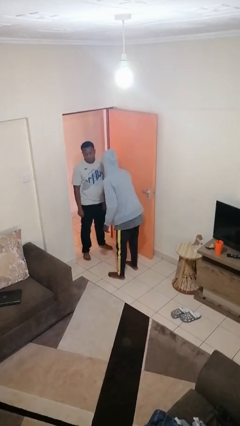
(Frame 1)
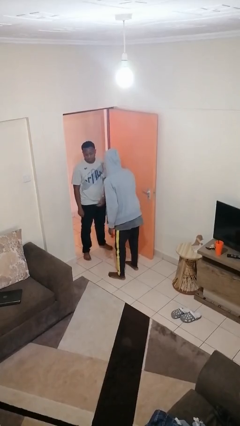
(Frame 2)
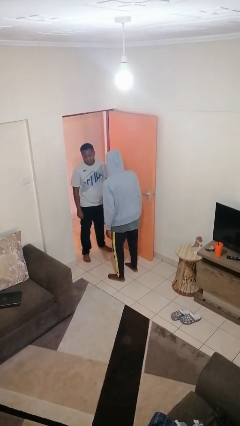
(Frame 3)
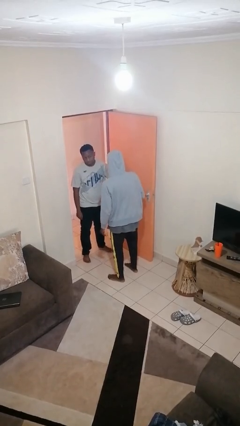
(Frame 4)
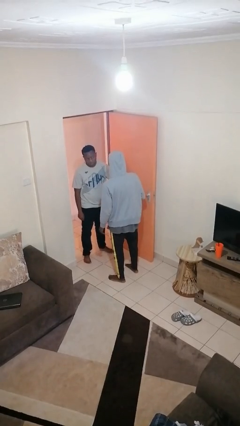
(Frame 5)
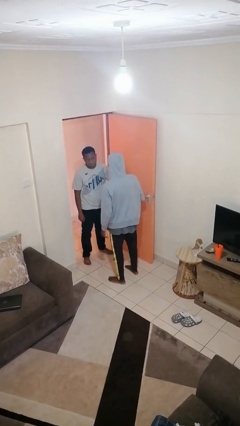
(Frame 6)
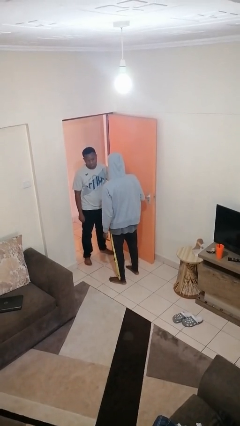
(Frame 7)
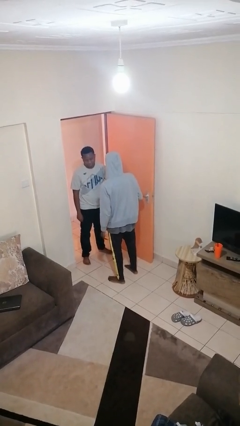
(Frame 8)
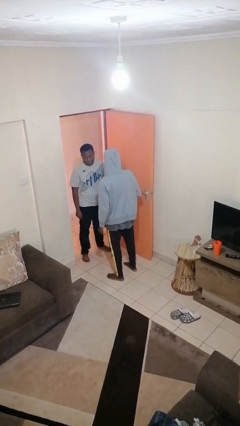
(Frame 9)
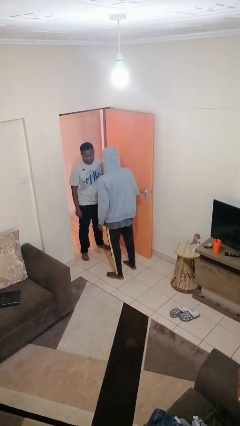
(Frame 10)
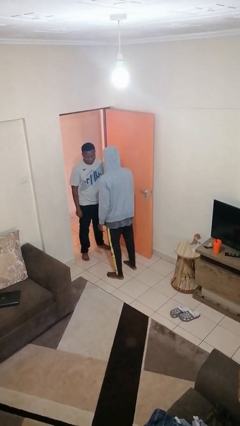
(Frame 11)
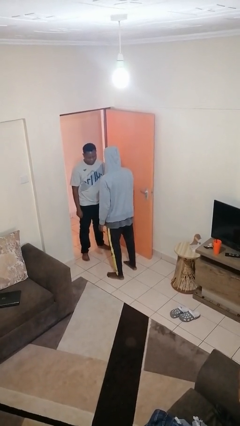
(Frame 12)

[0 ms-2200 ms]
person grabs person by forearm

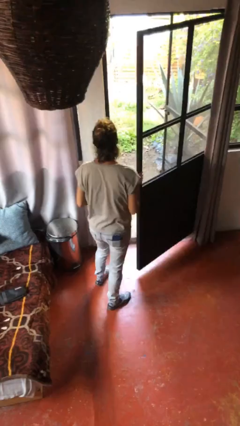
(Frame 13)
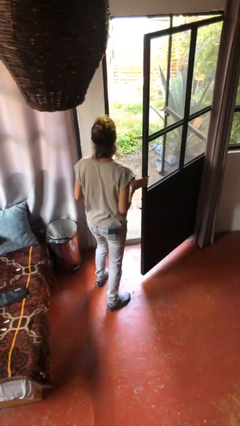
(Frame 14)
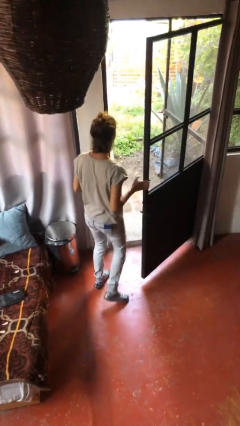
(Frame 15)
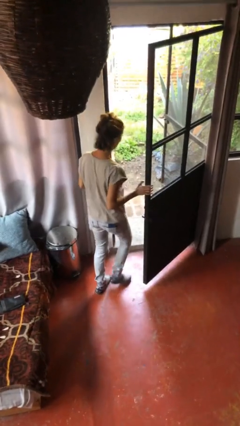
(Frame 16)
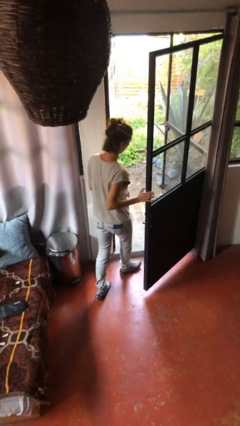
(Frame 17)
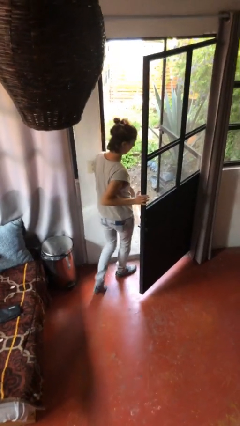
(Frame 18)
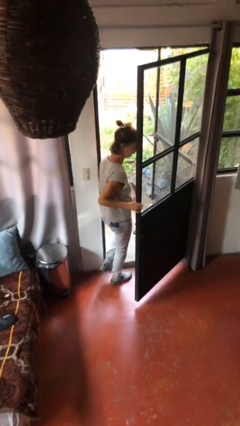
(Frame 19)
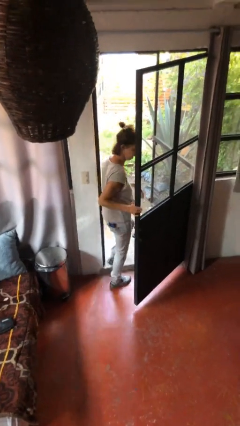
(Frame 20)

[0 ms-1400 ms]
person exits scene through structure

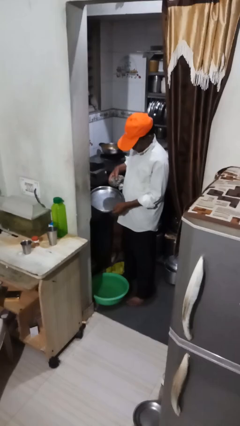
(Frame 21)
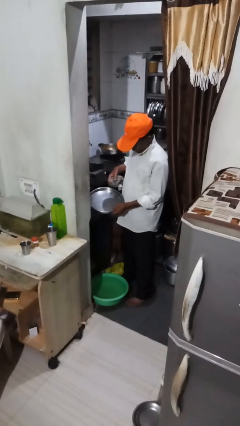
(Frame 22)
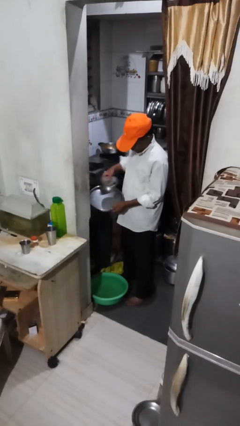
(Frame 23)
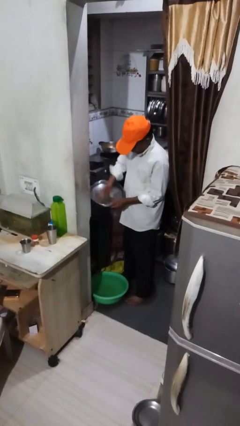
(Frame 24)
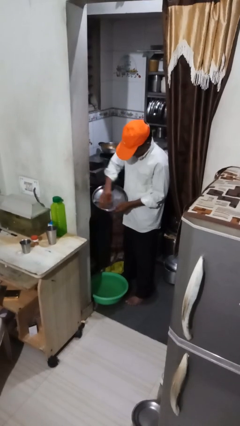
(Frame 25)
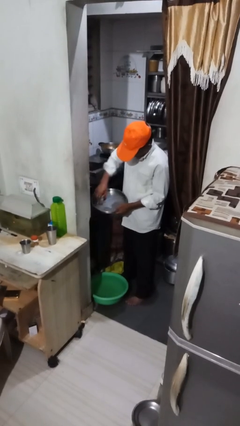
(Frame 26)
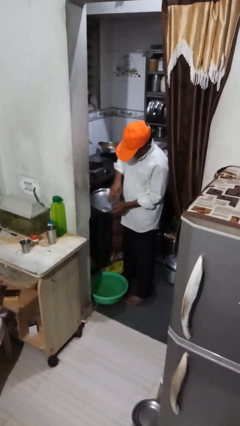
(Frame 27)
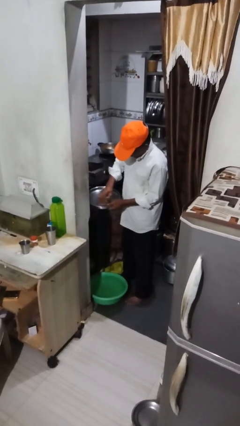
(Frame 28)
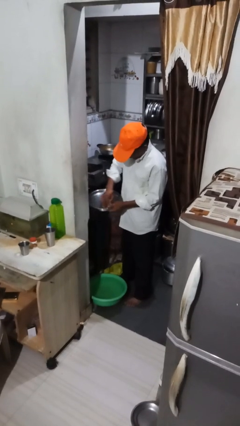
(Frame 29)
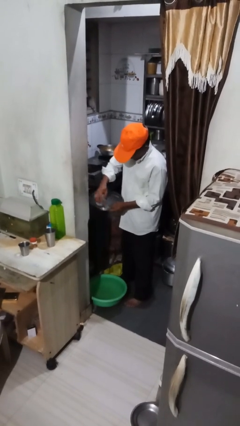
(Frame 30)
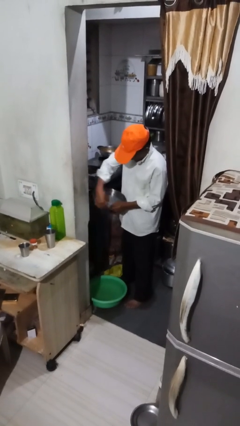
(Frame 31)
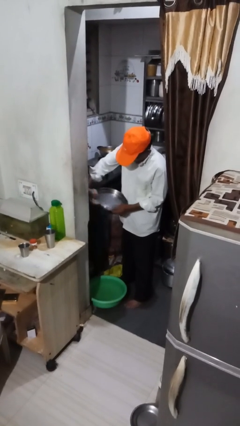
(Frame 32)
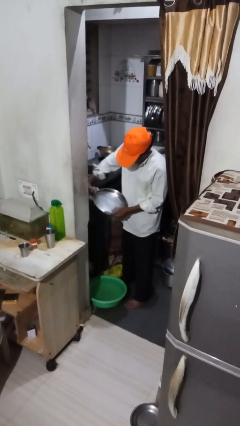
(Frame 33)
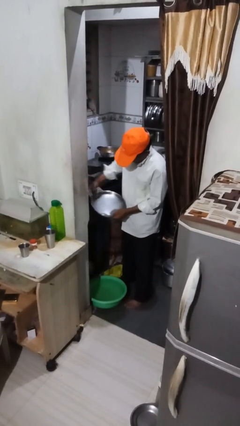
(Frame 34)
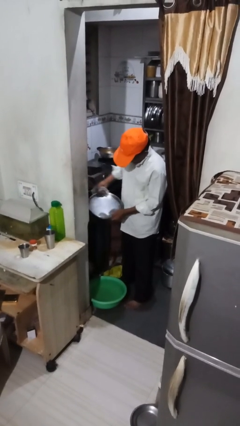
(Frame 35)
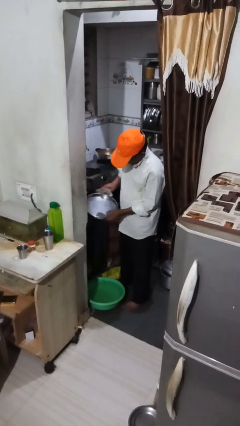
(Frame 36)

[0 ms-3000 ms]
person dries dish

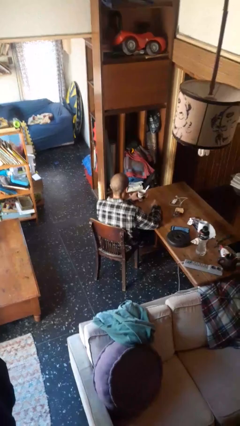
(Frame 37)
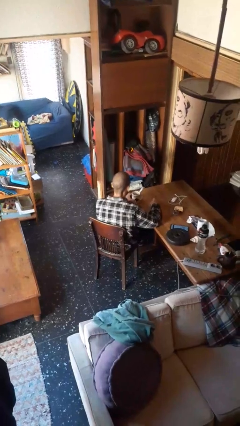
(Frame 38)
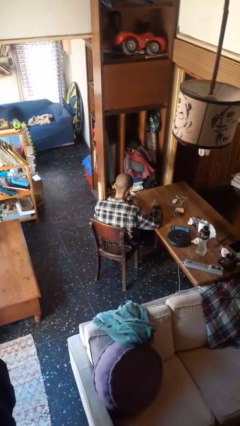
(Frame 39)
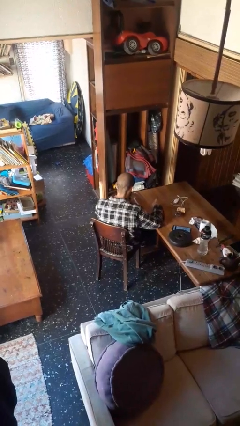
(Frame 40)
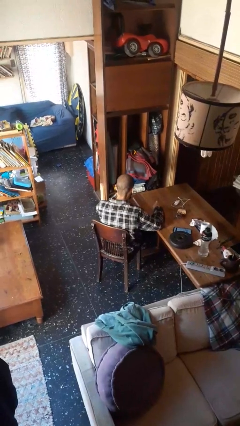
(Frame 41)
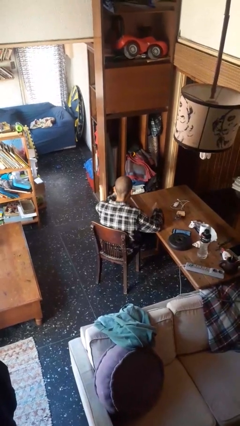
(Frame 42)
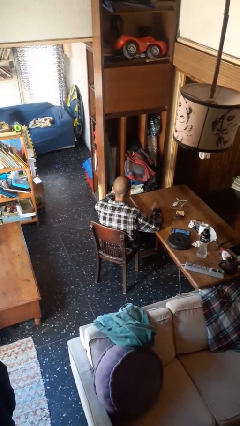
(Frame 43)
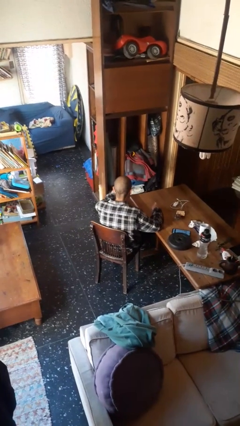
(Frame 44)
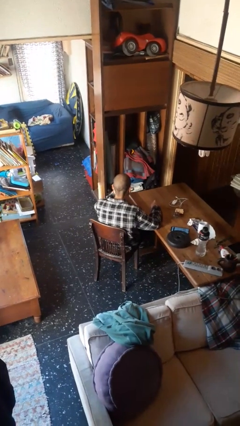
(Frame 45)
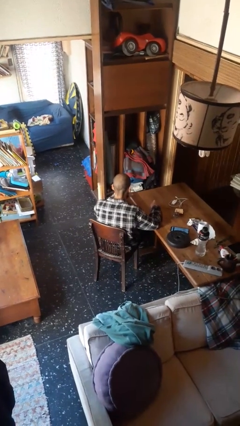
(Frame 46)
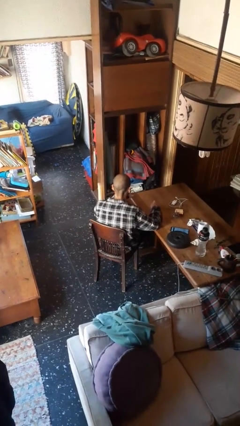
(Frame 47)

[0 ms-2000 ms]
person drinks from mug

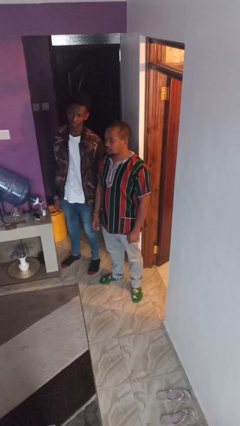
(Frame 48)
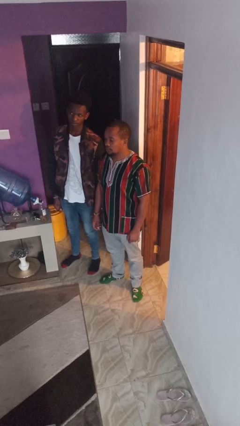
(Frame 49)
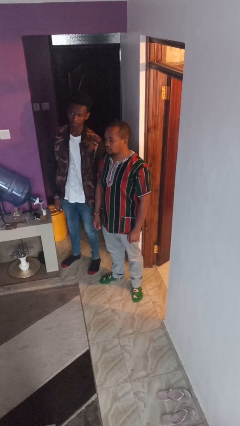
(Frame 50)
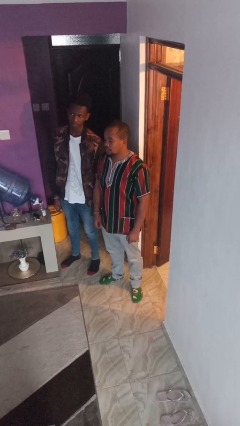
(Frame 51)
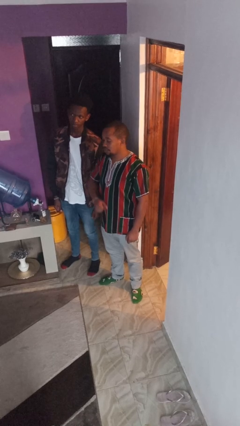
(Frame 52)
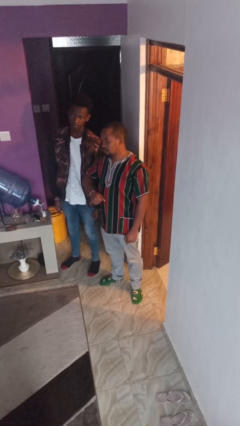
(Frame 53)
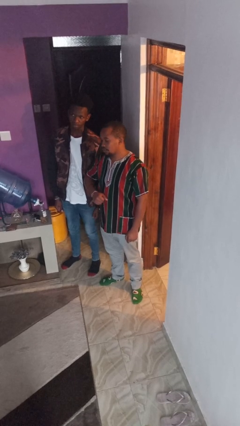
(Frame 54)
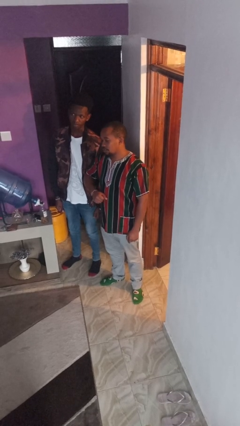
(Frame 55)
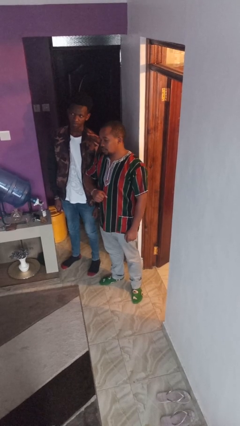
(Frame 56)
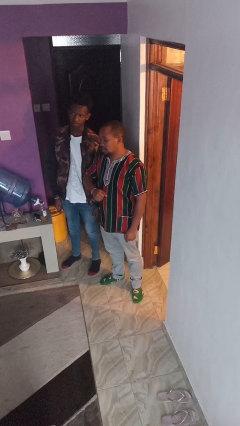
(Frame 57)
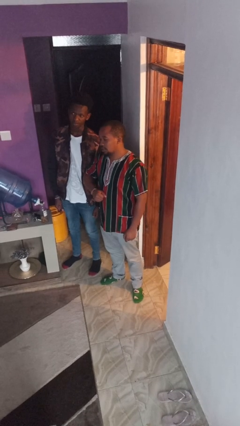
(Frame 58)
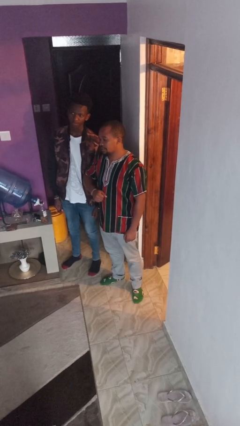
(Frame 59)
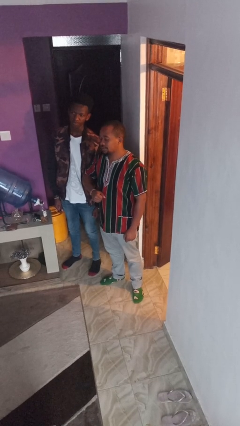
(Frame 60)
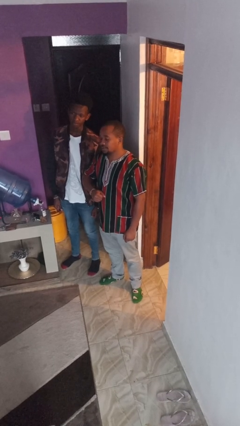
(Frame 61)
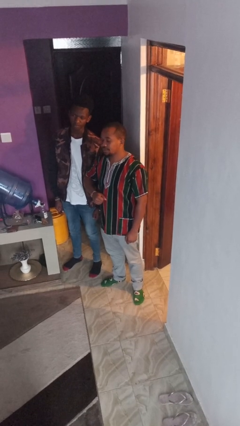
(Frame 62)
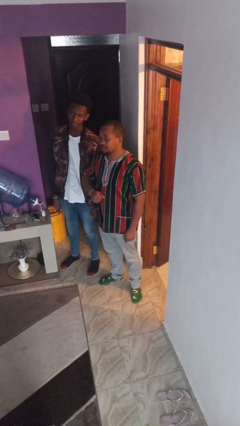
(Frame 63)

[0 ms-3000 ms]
person nudges person with elbow

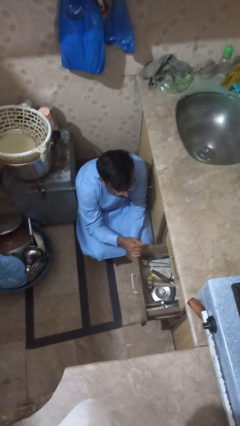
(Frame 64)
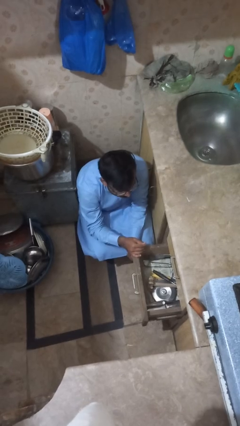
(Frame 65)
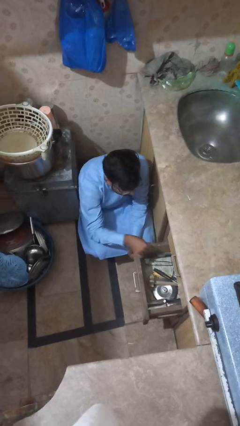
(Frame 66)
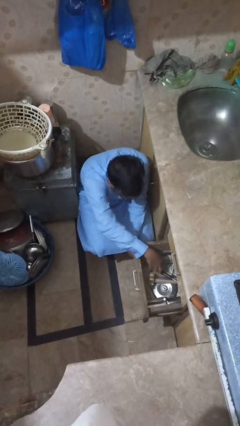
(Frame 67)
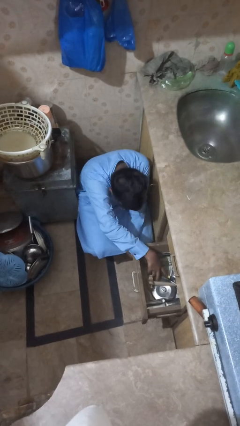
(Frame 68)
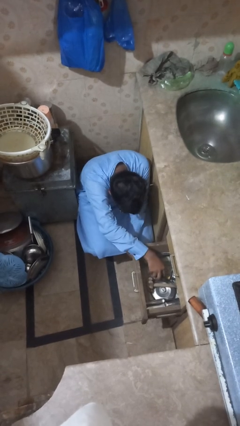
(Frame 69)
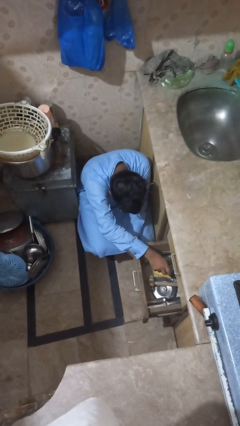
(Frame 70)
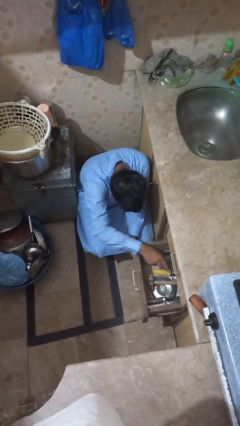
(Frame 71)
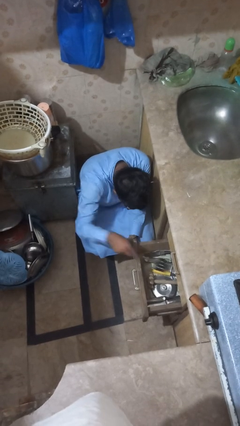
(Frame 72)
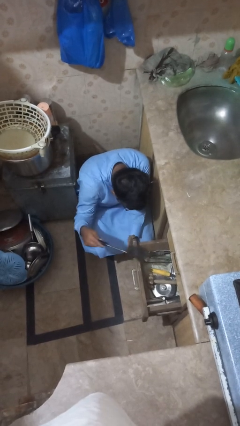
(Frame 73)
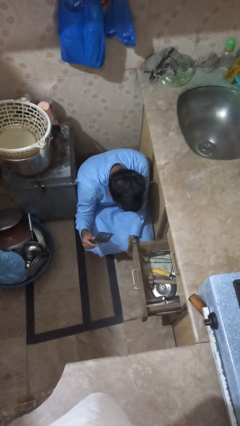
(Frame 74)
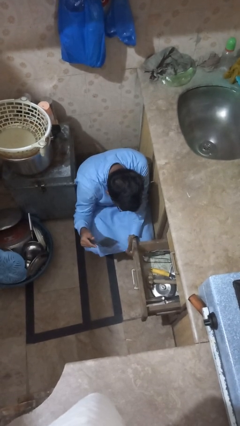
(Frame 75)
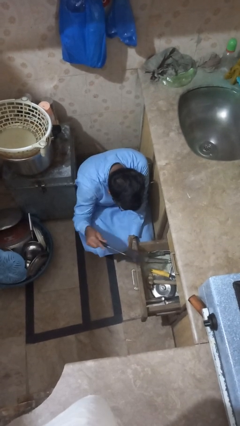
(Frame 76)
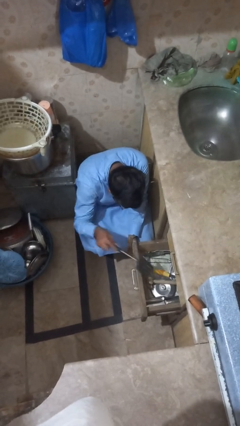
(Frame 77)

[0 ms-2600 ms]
person searches in kitchen drawer

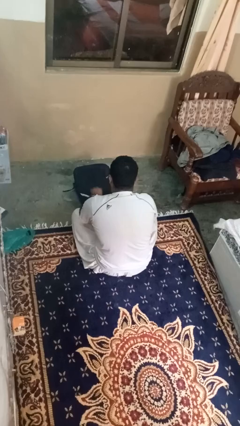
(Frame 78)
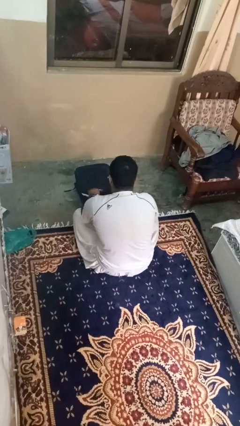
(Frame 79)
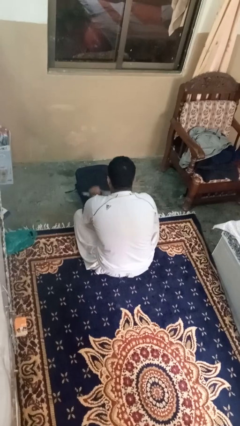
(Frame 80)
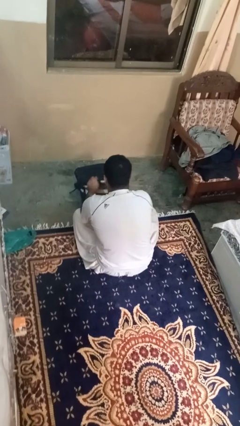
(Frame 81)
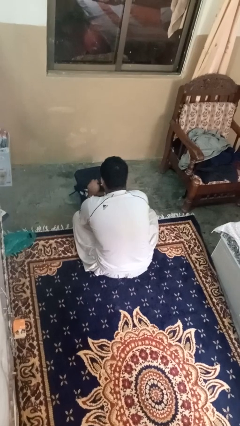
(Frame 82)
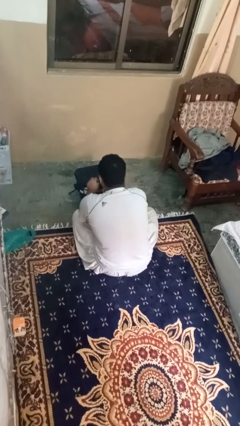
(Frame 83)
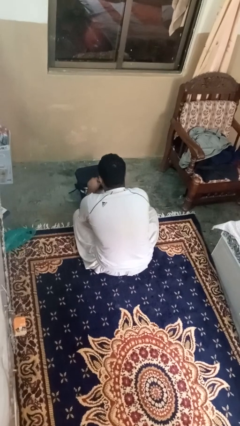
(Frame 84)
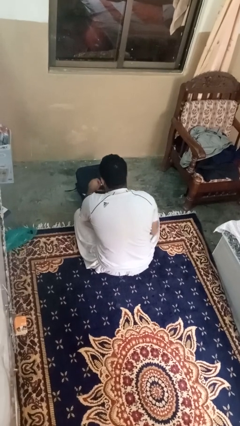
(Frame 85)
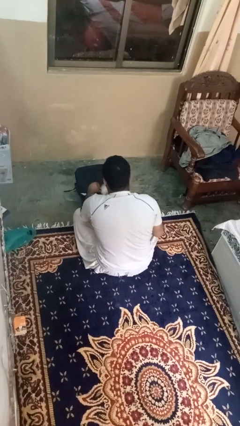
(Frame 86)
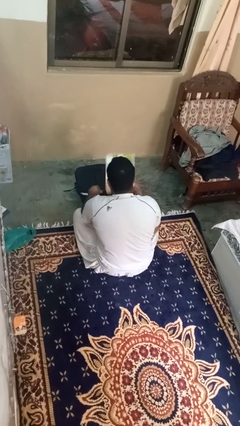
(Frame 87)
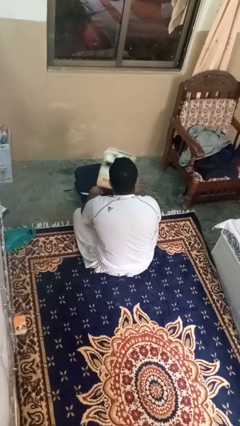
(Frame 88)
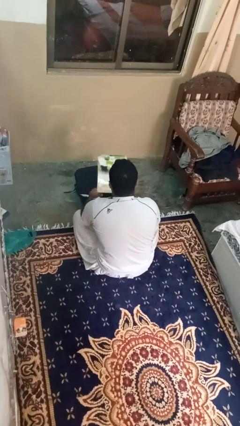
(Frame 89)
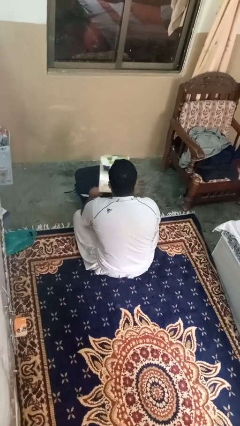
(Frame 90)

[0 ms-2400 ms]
person takes object from bag

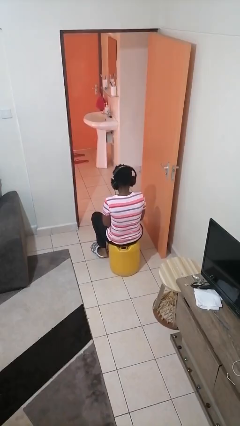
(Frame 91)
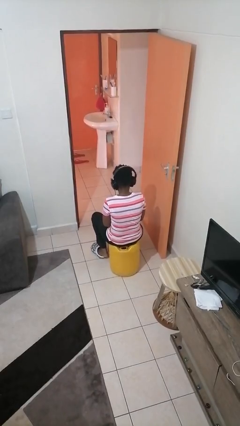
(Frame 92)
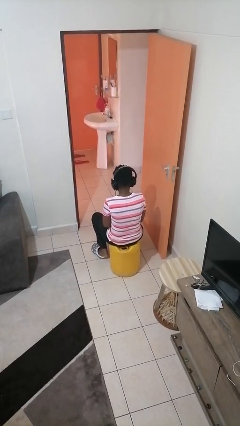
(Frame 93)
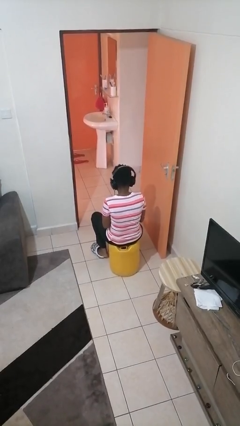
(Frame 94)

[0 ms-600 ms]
person takes off headphones
